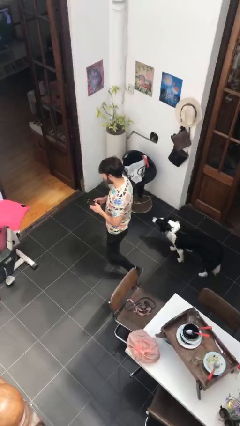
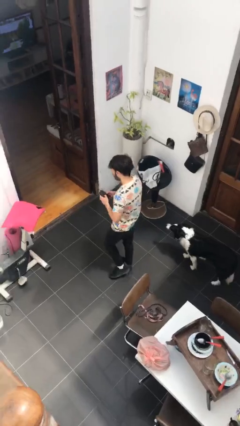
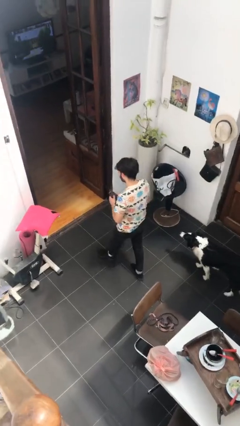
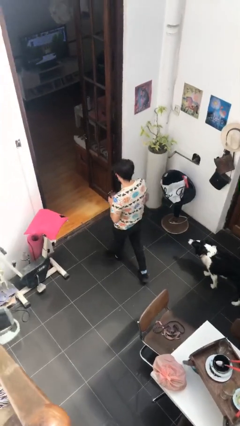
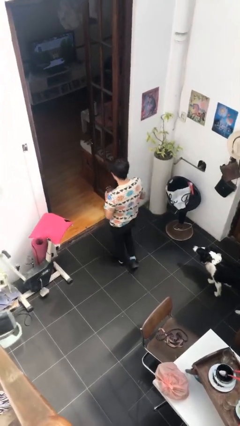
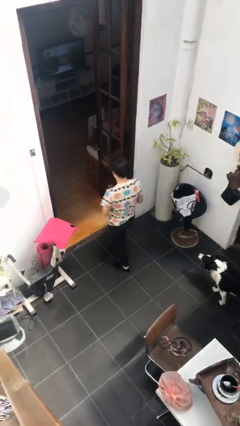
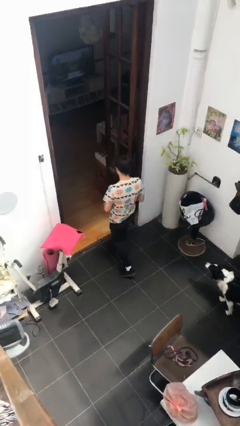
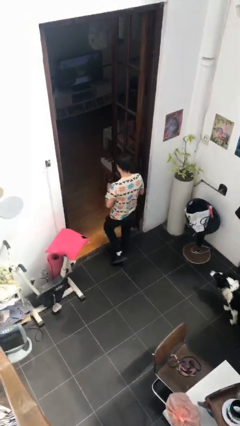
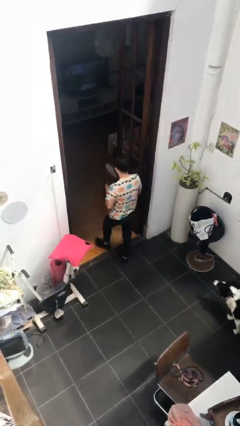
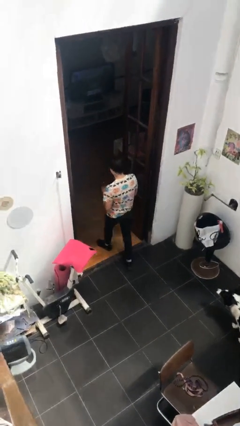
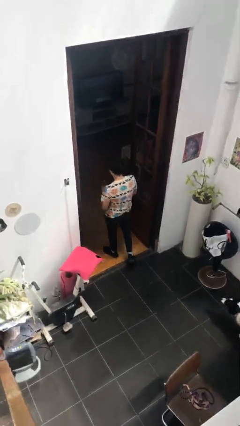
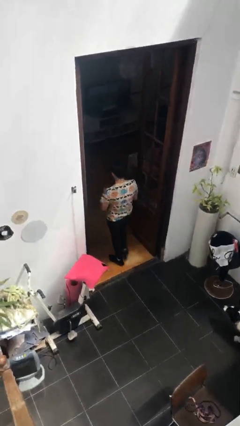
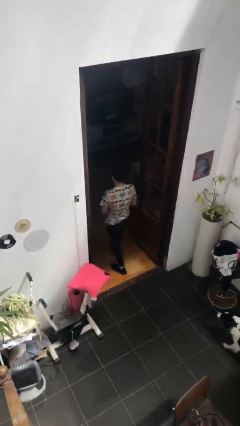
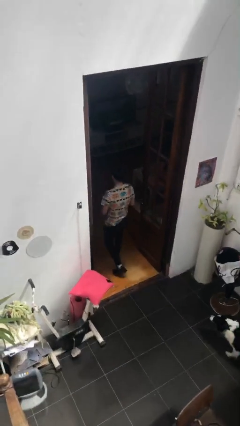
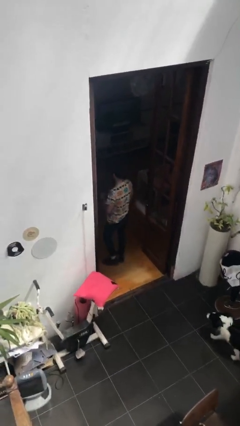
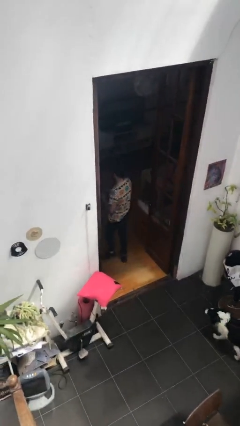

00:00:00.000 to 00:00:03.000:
person exits scene through structure

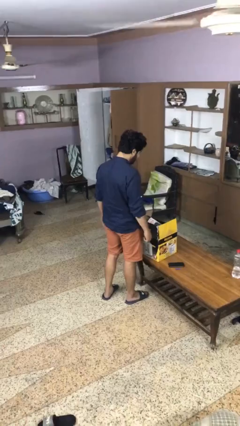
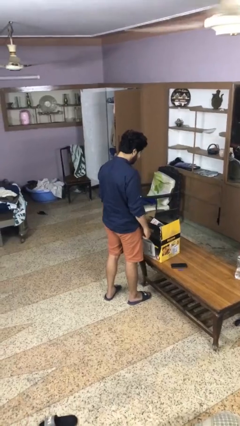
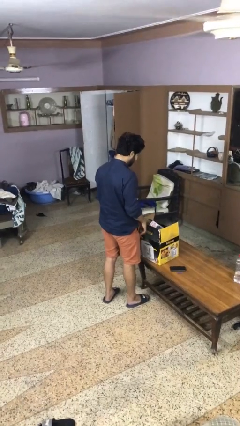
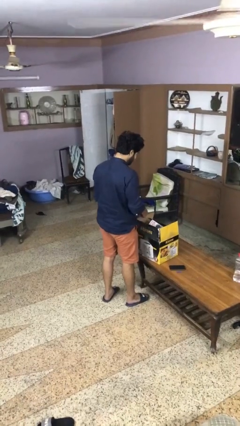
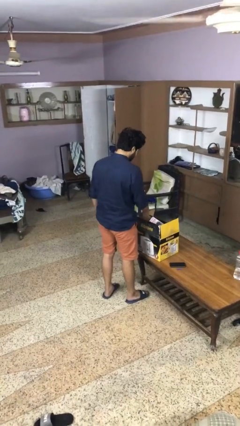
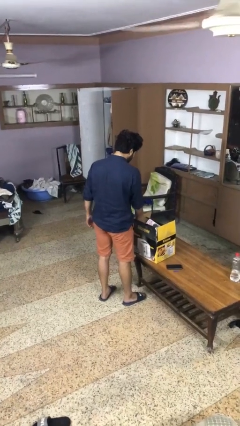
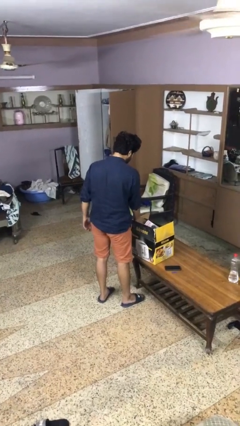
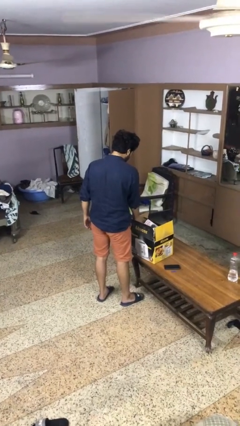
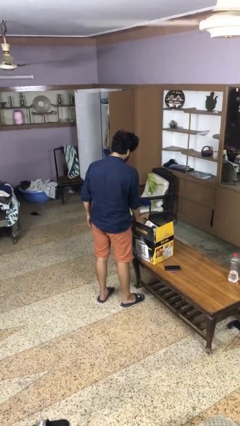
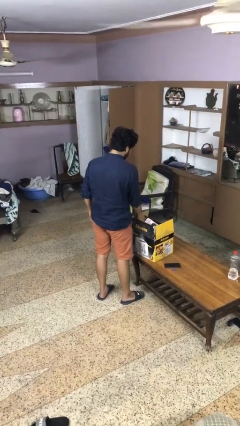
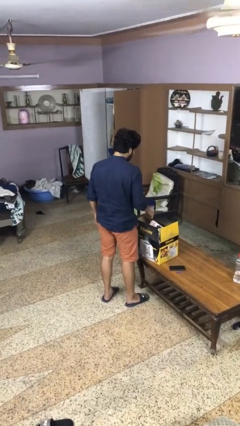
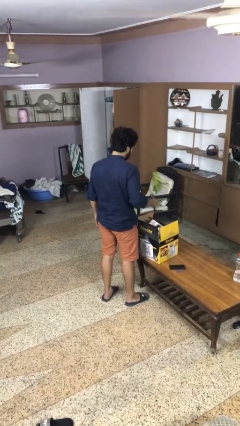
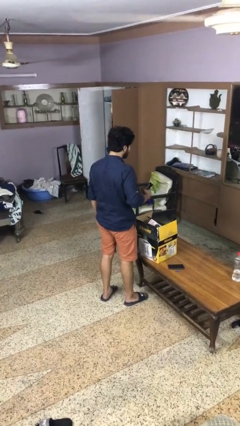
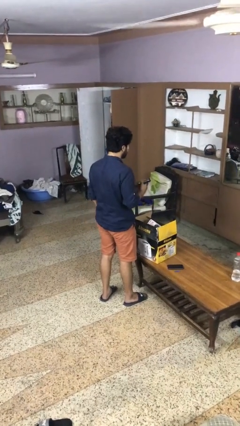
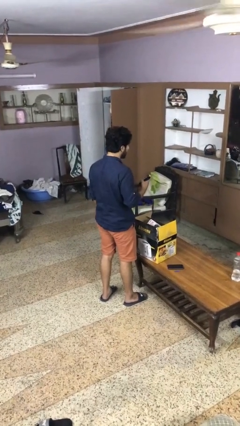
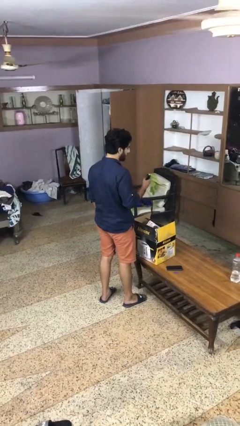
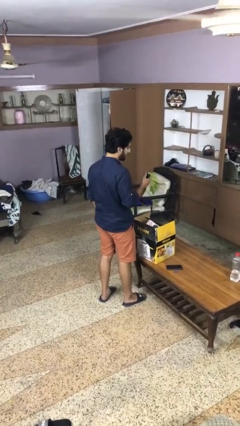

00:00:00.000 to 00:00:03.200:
person takes object from box

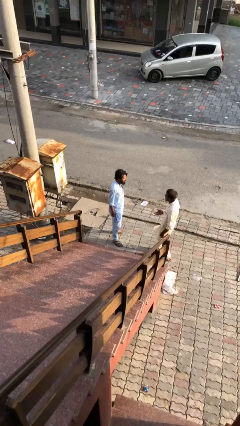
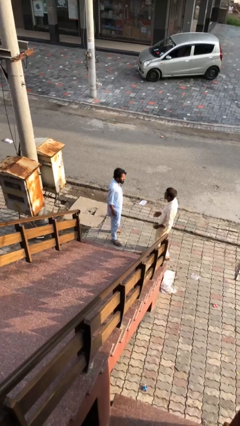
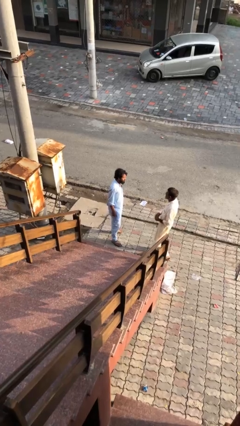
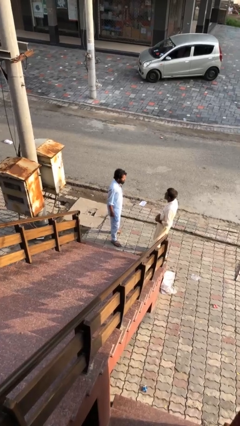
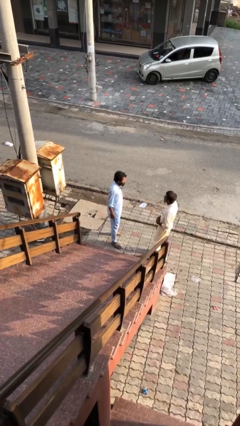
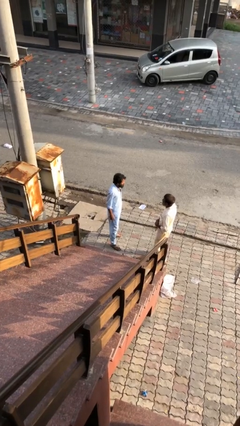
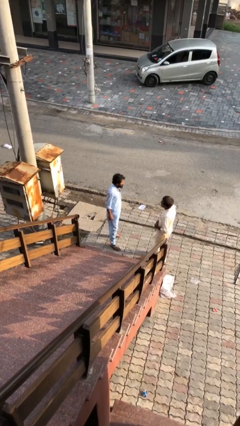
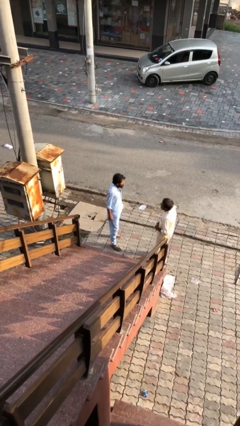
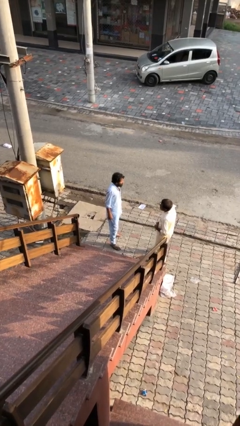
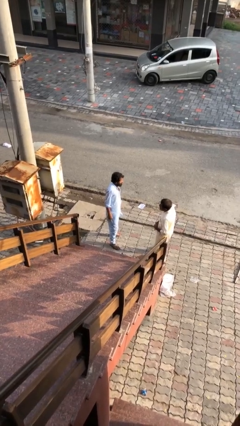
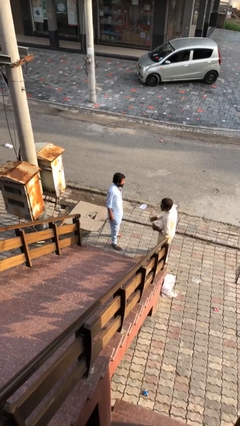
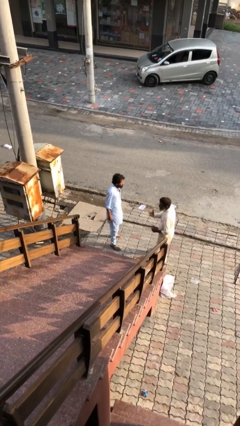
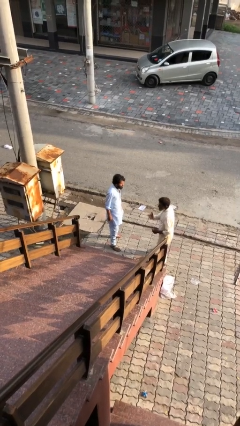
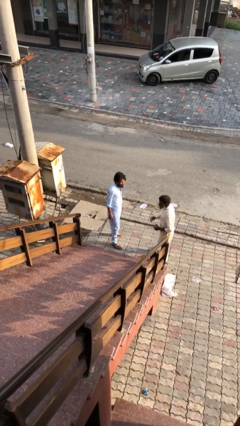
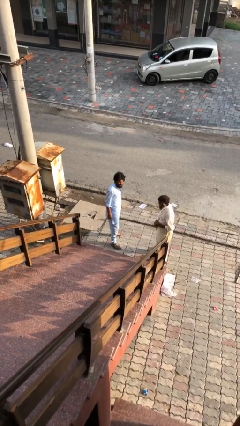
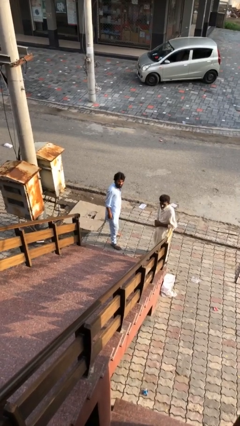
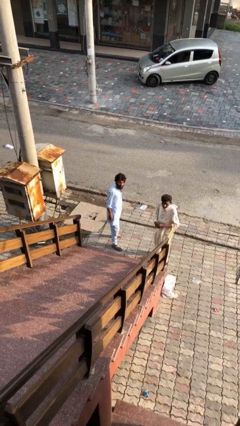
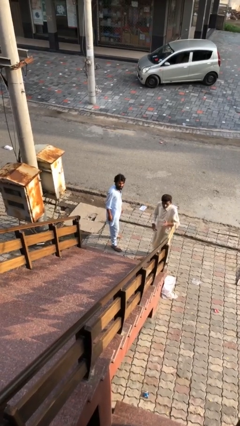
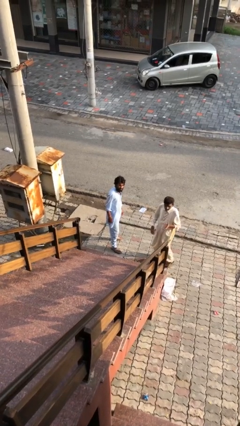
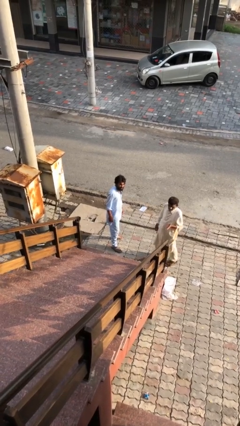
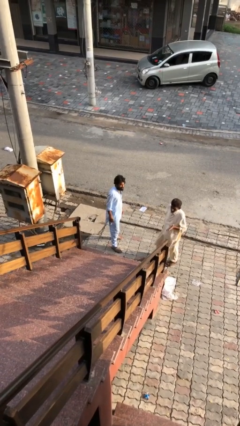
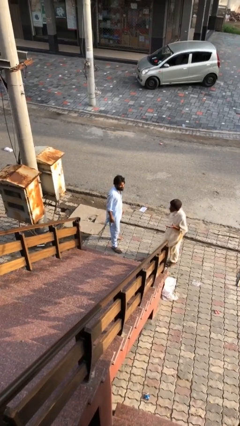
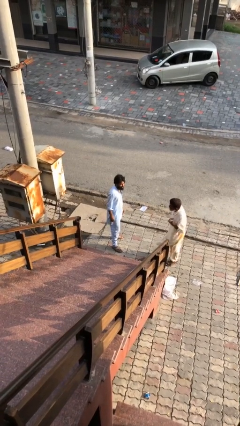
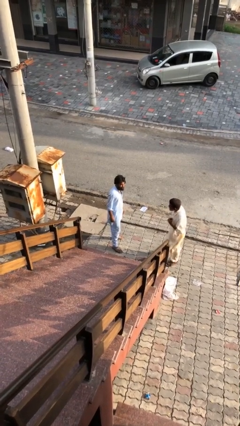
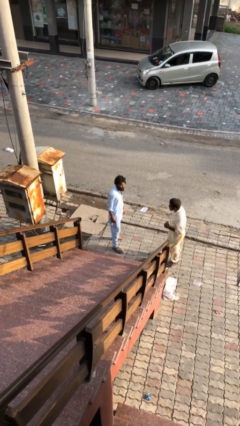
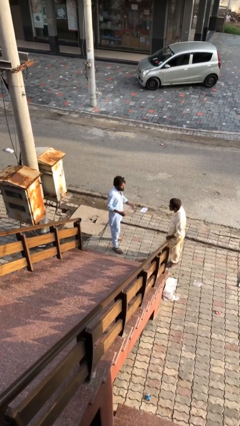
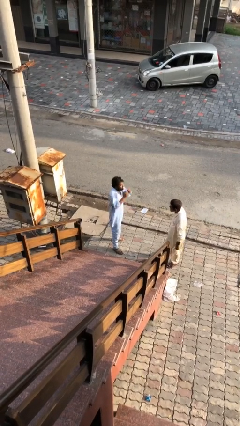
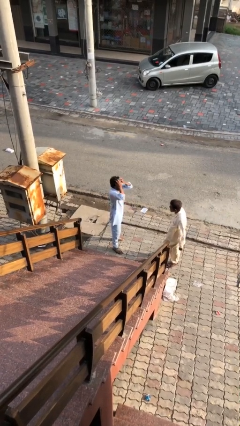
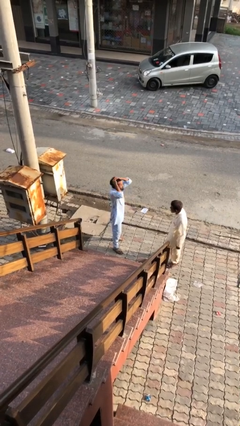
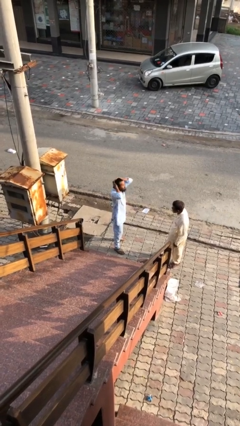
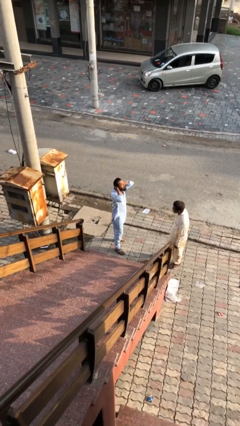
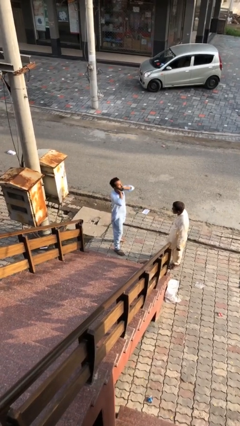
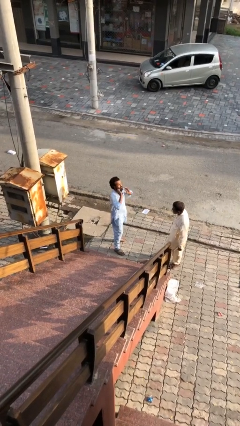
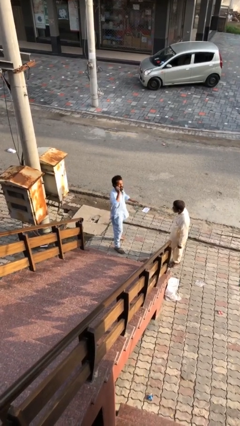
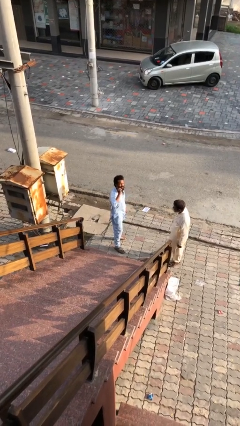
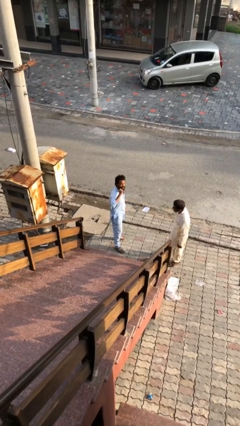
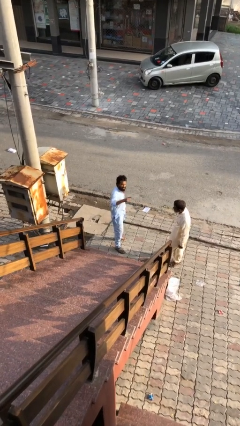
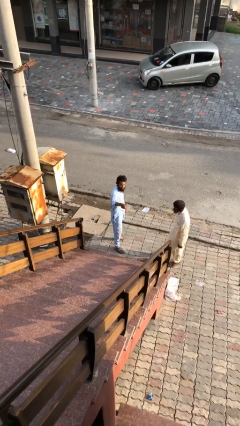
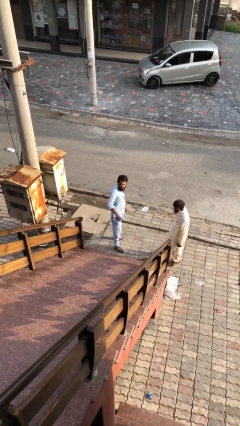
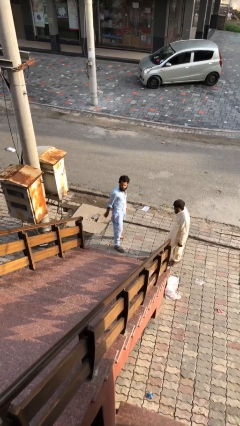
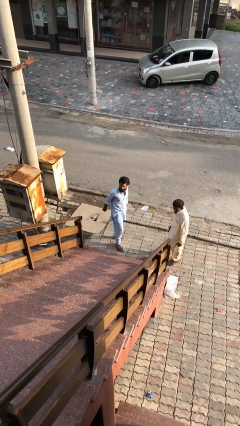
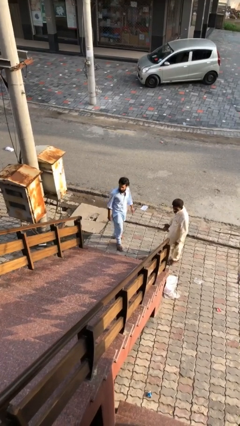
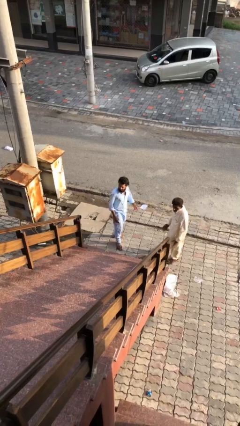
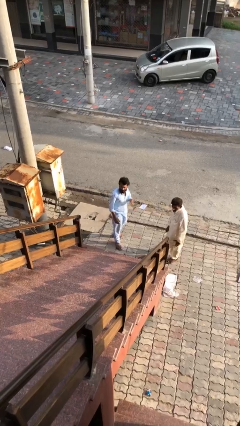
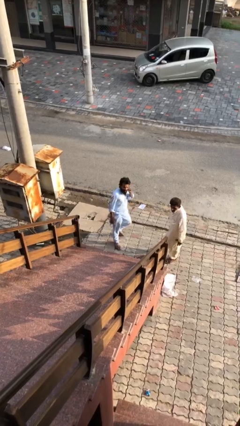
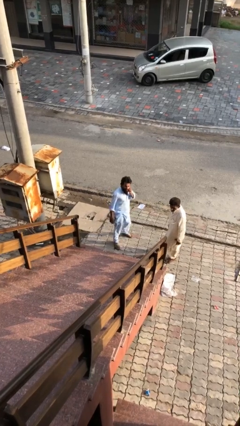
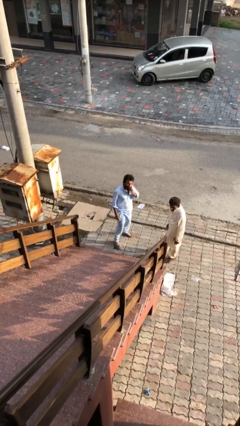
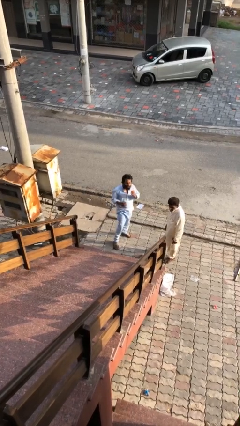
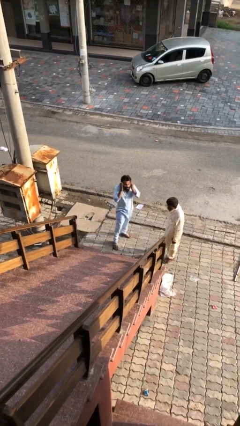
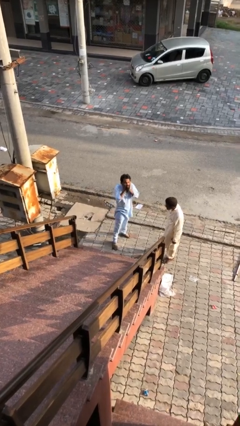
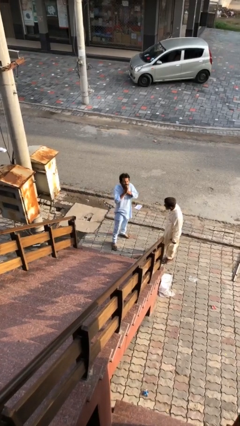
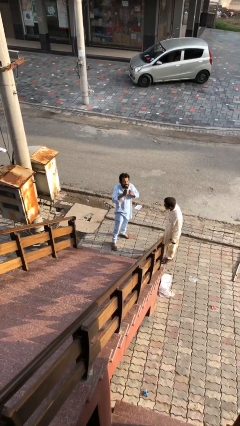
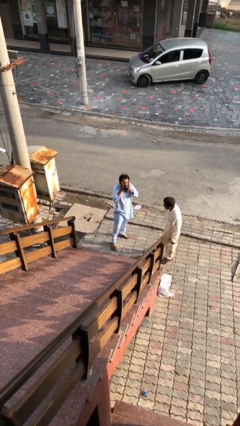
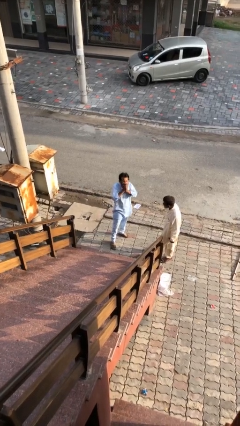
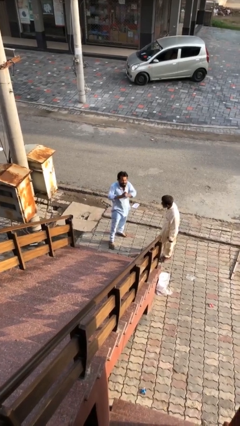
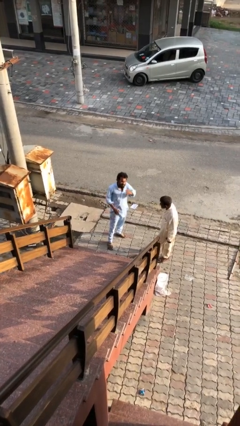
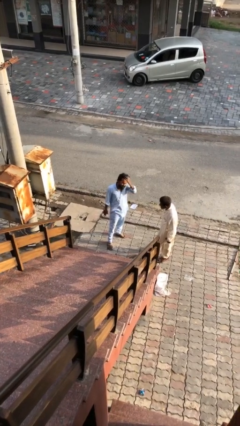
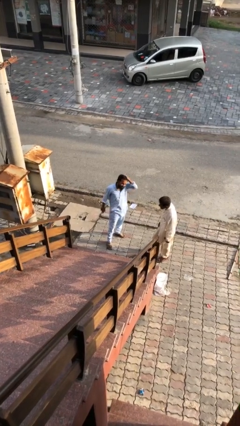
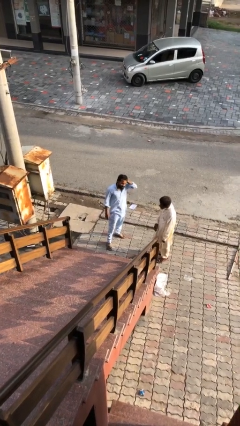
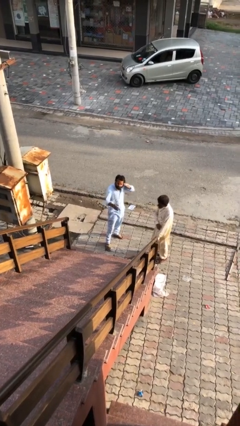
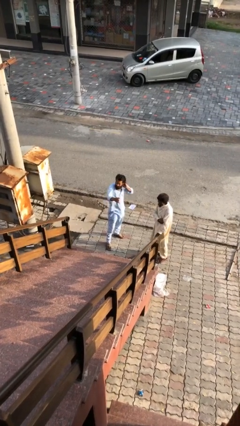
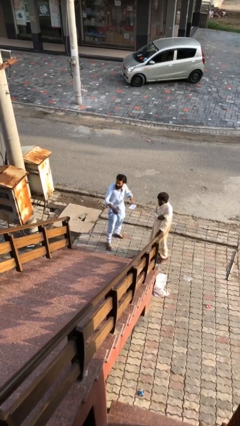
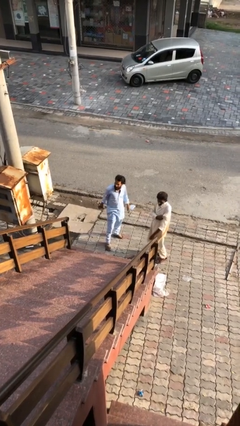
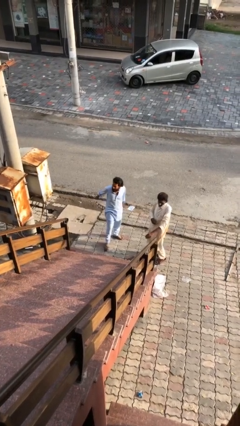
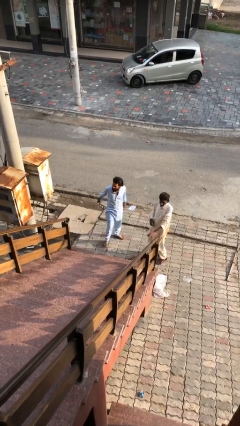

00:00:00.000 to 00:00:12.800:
person talks to person
